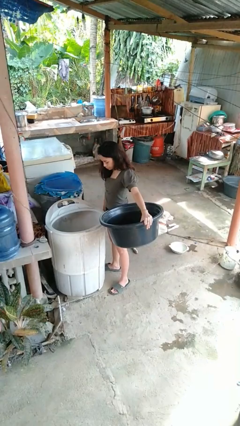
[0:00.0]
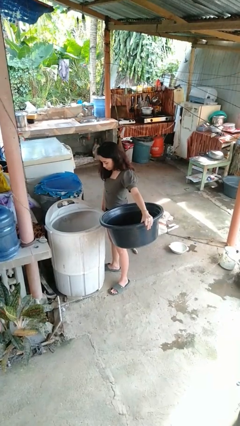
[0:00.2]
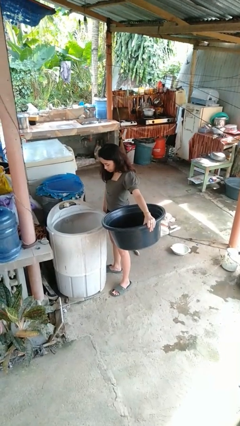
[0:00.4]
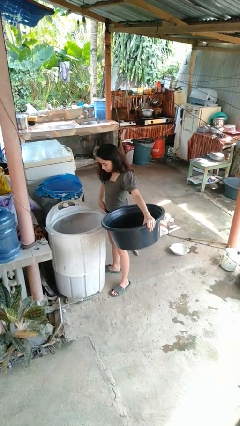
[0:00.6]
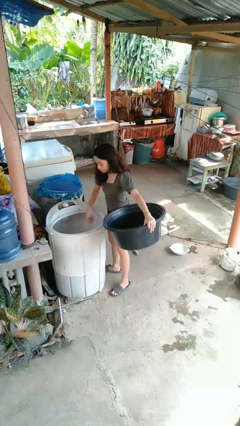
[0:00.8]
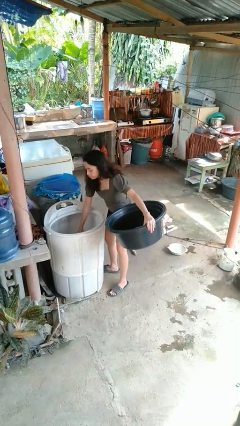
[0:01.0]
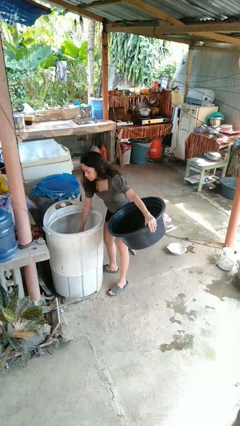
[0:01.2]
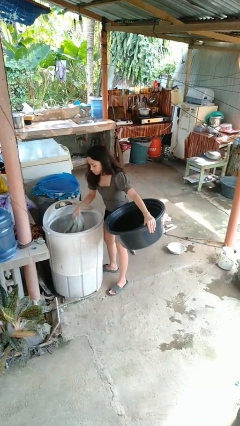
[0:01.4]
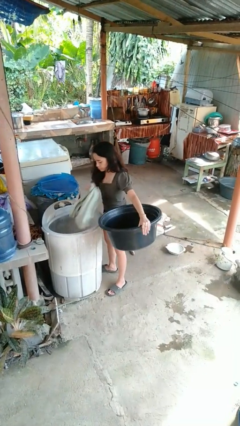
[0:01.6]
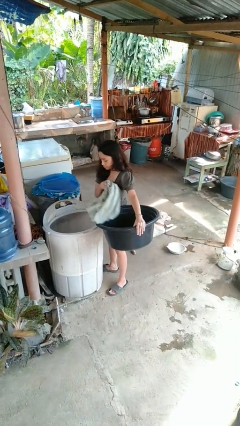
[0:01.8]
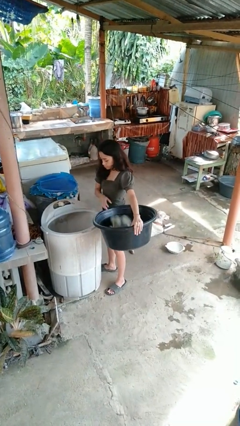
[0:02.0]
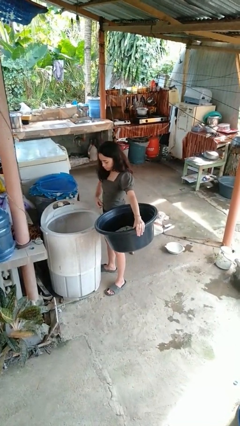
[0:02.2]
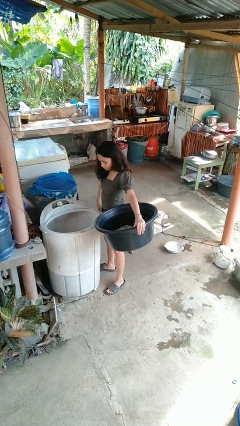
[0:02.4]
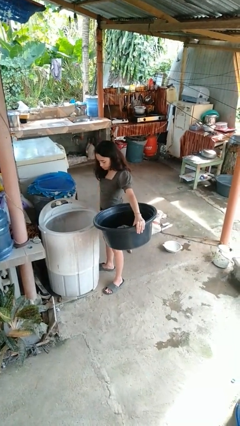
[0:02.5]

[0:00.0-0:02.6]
person unloads clotheswasher

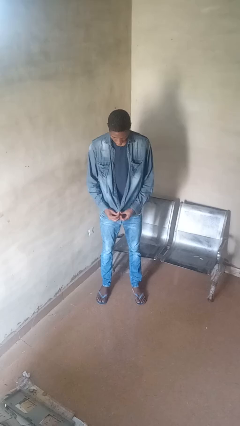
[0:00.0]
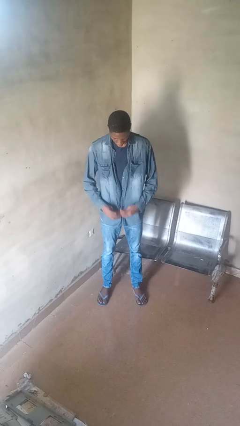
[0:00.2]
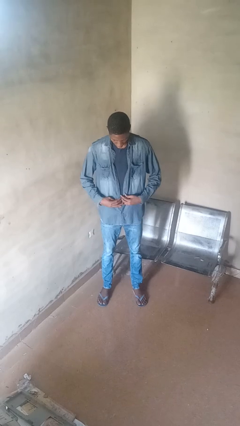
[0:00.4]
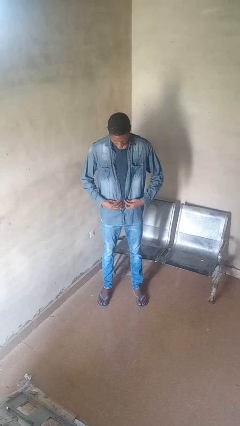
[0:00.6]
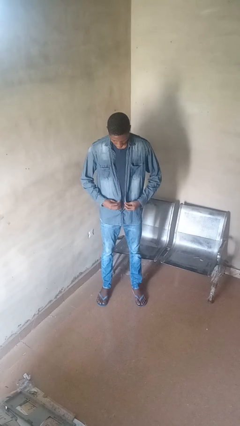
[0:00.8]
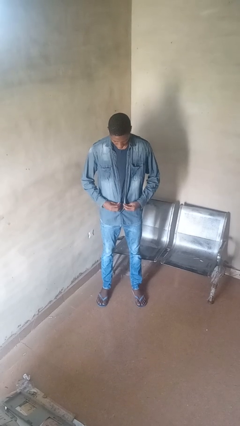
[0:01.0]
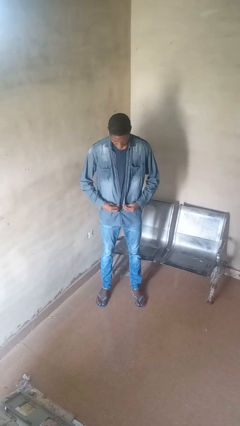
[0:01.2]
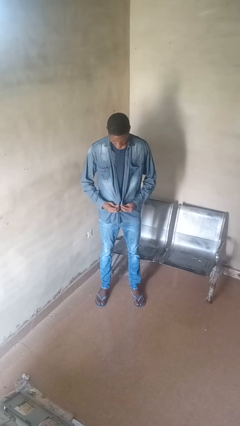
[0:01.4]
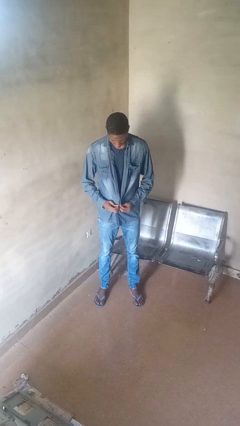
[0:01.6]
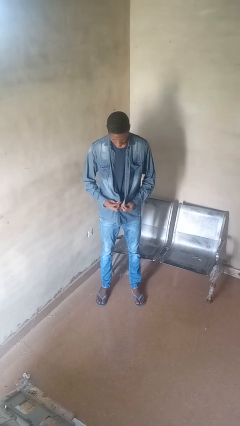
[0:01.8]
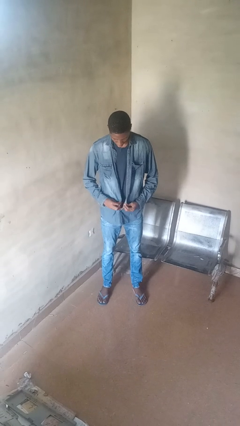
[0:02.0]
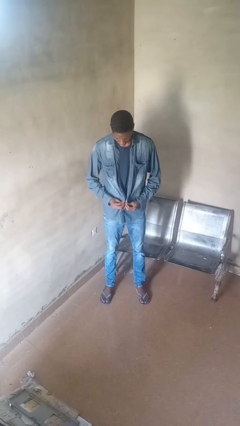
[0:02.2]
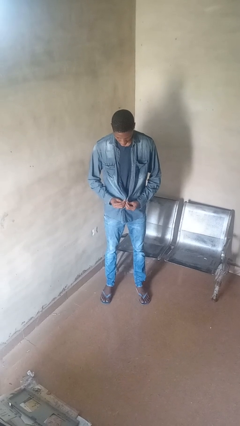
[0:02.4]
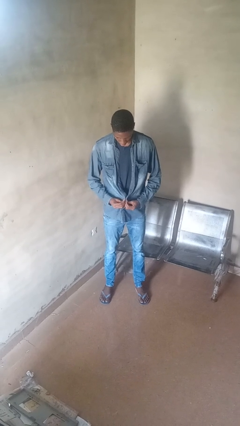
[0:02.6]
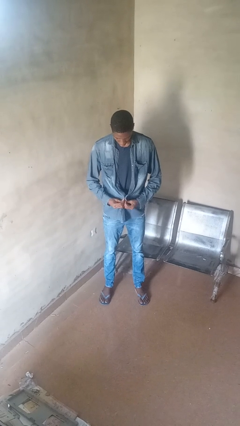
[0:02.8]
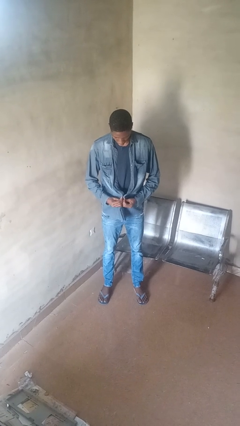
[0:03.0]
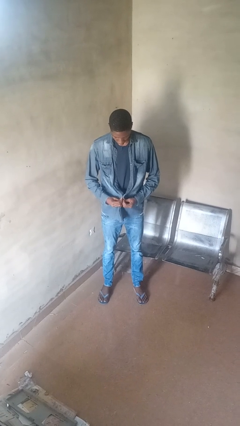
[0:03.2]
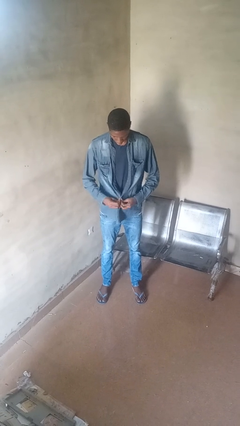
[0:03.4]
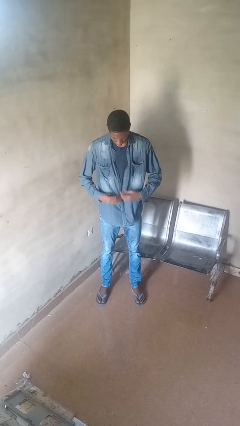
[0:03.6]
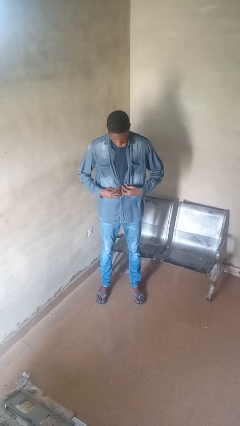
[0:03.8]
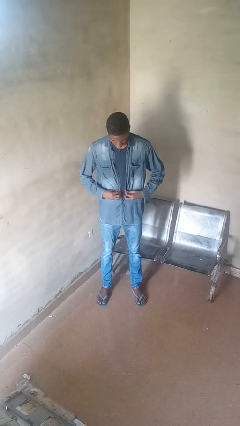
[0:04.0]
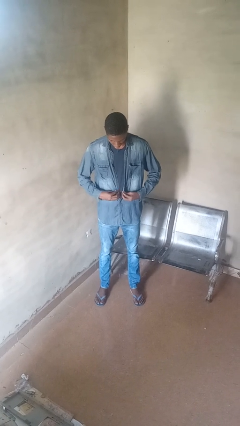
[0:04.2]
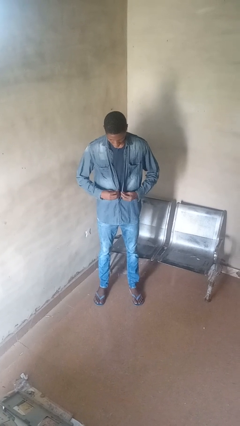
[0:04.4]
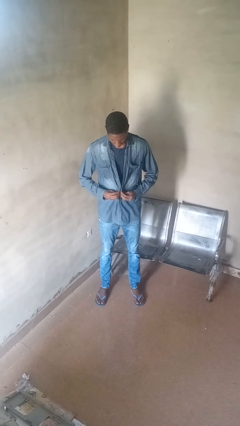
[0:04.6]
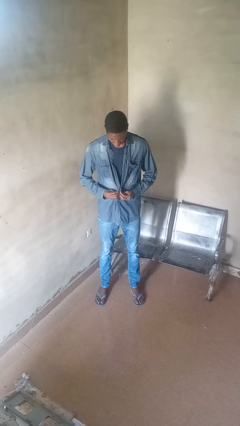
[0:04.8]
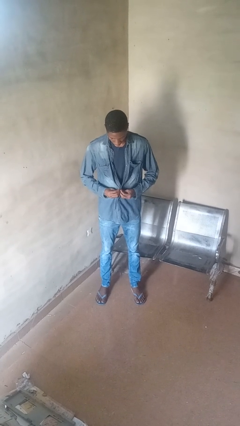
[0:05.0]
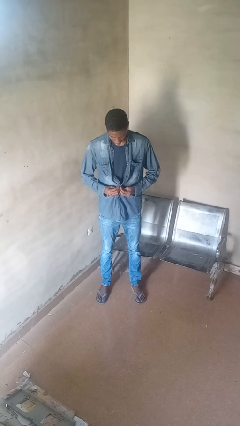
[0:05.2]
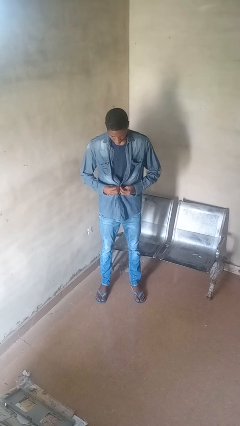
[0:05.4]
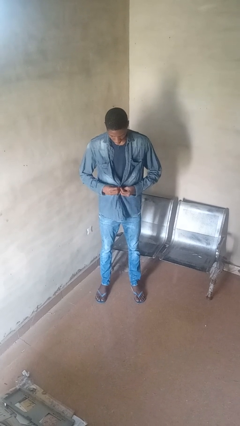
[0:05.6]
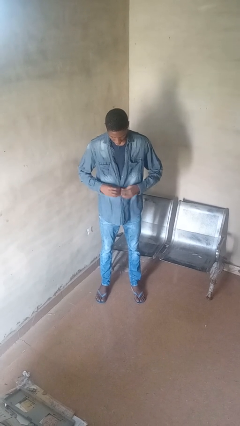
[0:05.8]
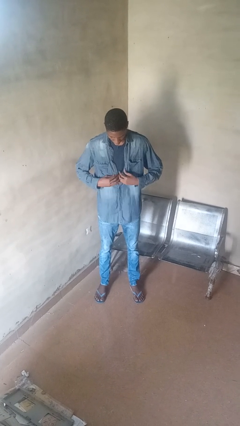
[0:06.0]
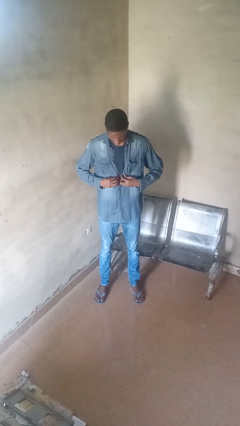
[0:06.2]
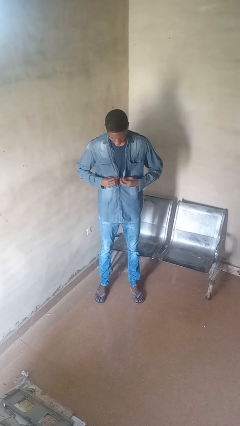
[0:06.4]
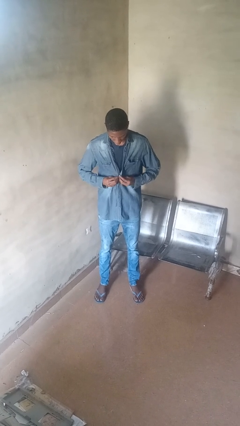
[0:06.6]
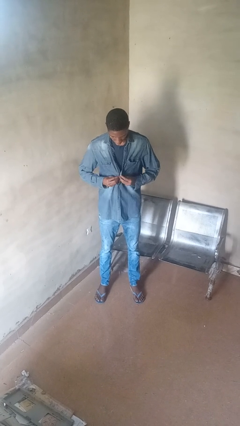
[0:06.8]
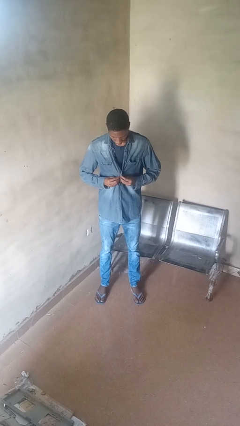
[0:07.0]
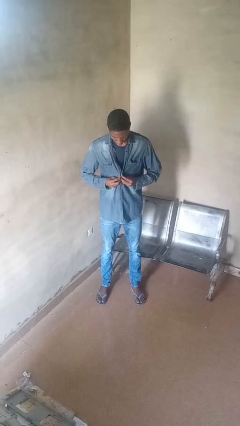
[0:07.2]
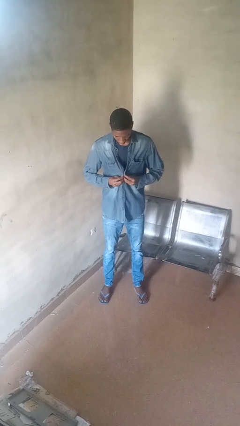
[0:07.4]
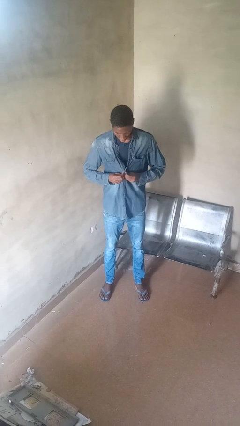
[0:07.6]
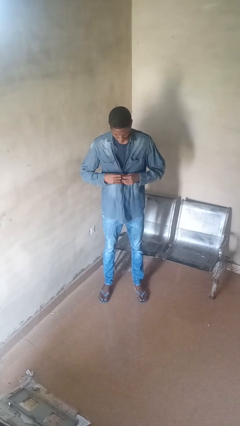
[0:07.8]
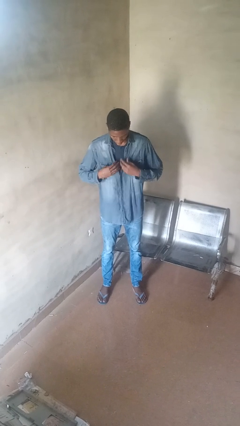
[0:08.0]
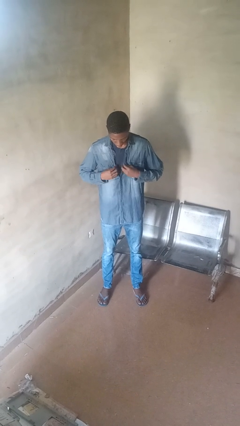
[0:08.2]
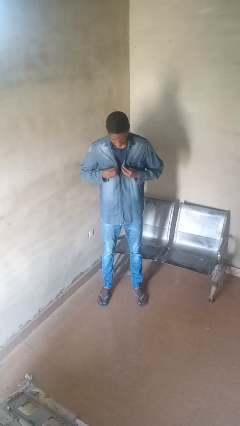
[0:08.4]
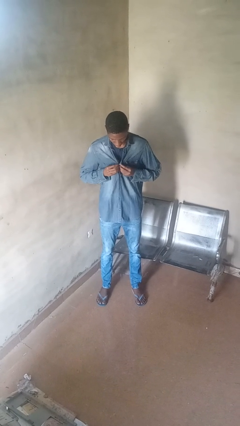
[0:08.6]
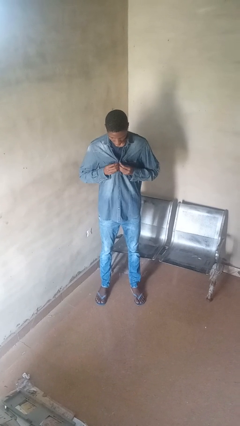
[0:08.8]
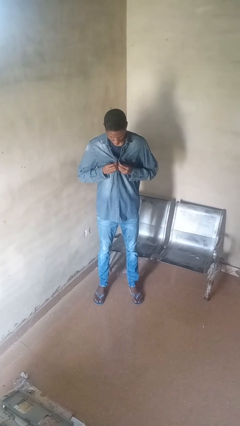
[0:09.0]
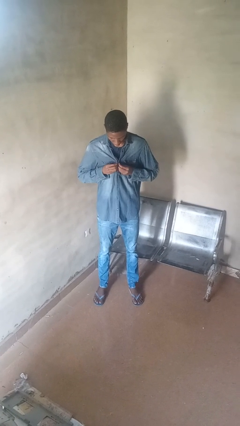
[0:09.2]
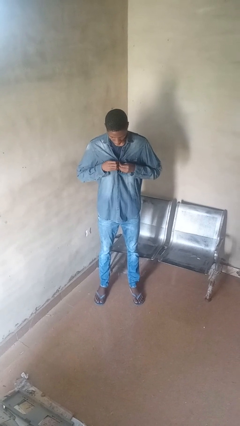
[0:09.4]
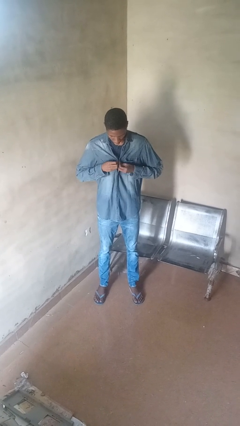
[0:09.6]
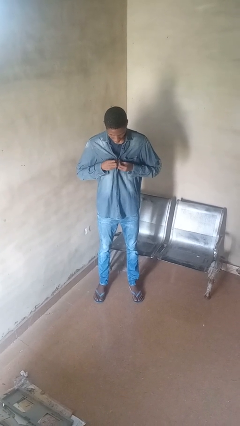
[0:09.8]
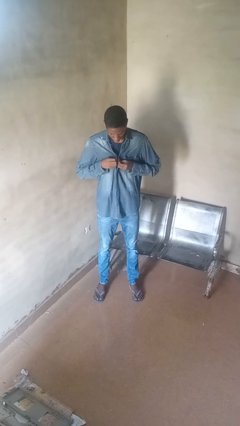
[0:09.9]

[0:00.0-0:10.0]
person buttons shirt

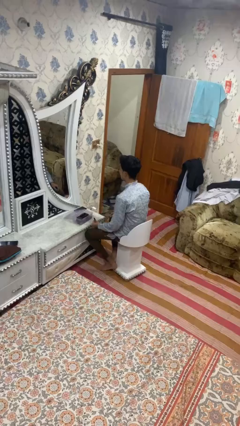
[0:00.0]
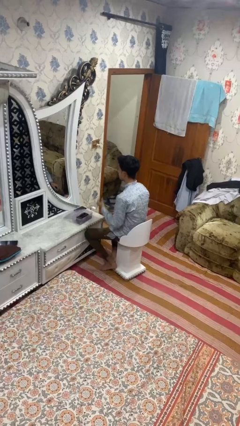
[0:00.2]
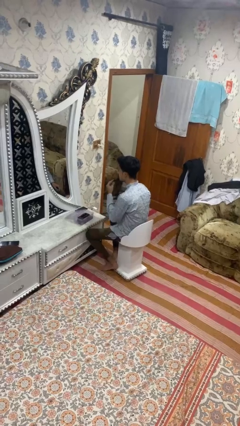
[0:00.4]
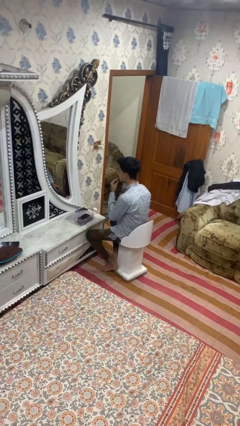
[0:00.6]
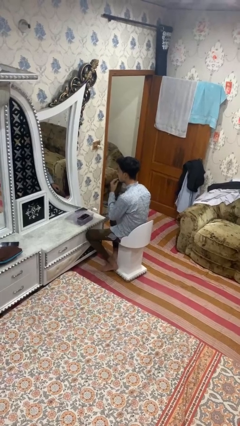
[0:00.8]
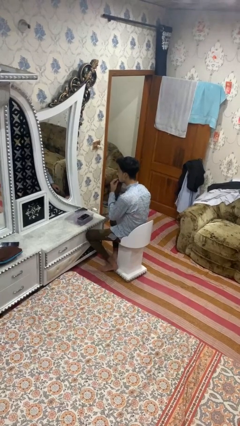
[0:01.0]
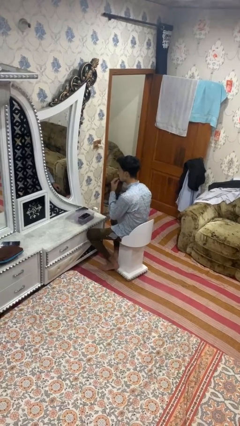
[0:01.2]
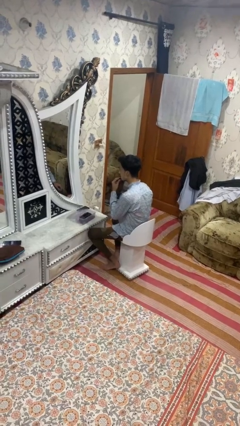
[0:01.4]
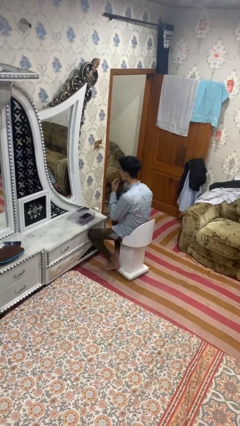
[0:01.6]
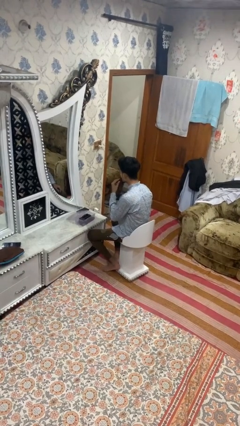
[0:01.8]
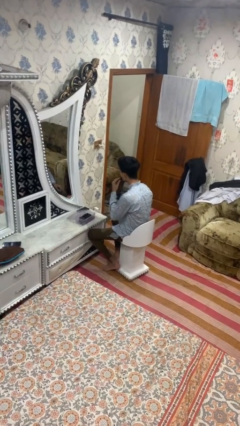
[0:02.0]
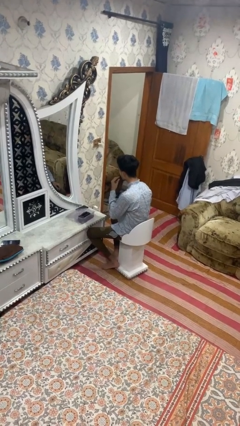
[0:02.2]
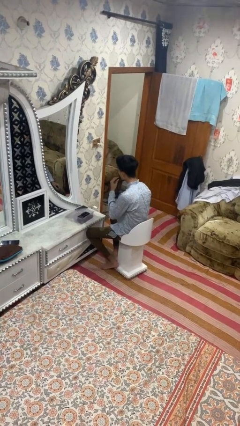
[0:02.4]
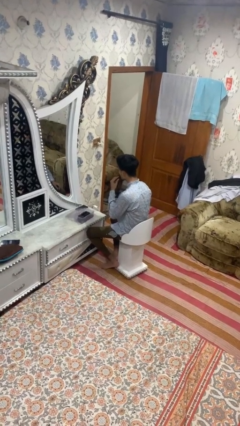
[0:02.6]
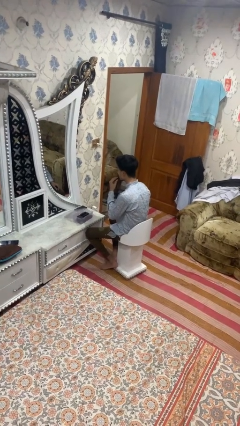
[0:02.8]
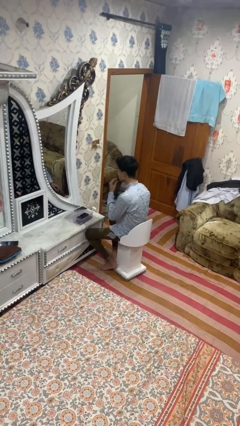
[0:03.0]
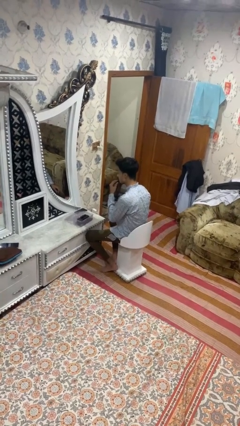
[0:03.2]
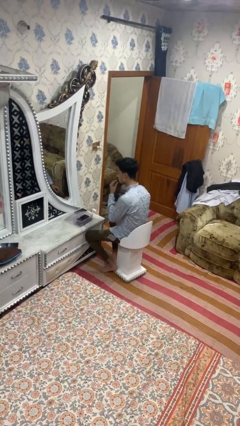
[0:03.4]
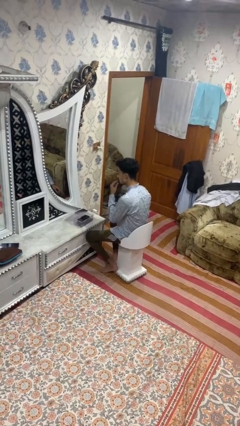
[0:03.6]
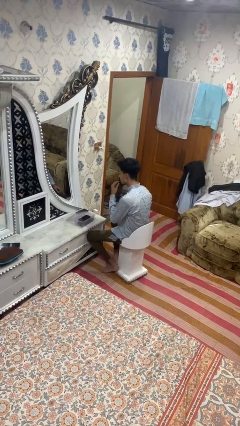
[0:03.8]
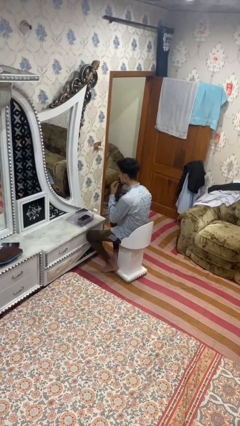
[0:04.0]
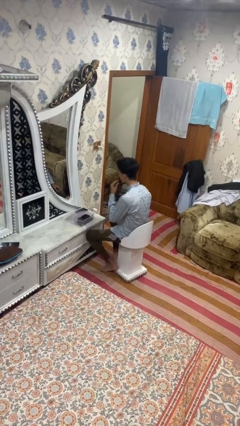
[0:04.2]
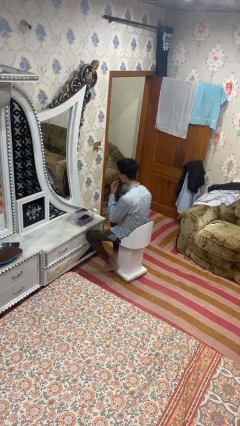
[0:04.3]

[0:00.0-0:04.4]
person applies lip makeup

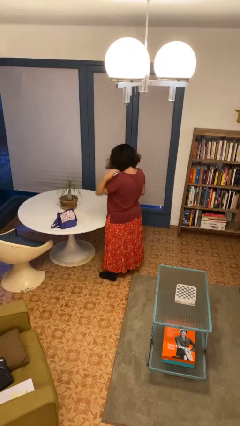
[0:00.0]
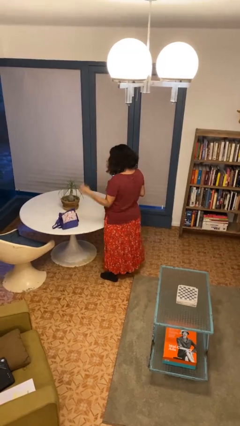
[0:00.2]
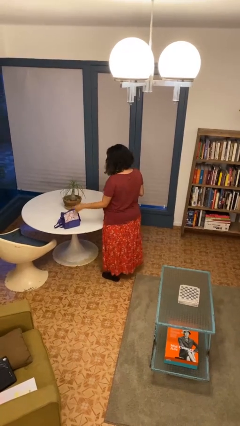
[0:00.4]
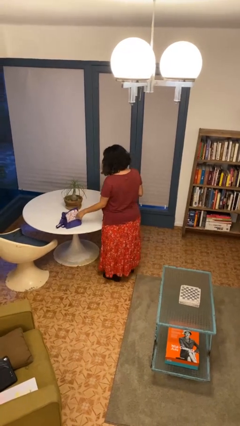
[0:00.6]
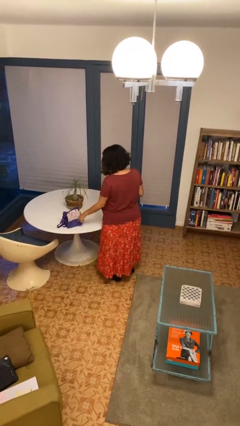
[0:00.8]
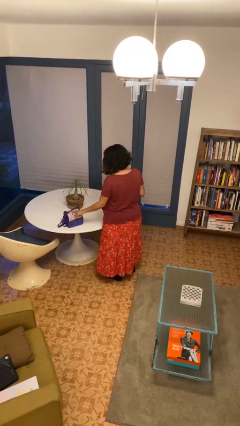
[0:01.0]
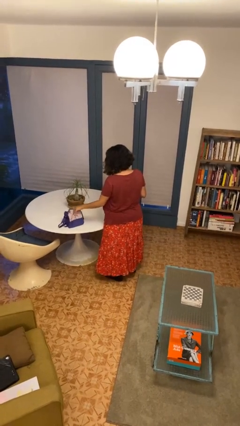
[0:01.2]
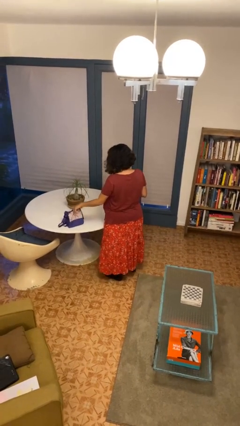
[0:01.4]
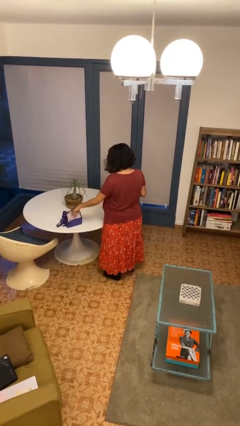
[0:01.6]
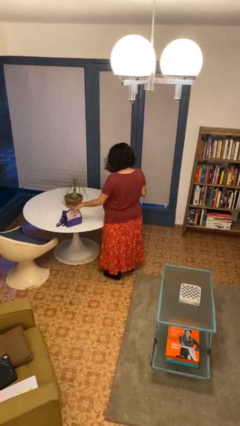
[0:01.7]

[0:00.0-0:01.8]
person taps object with finger
